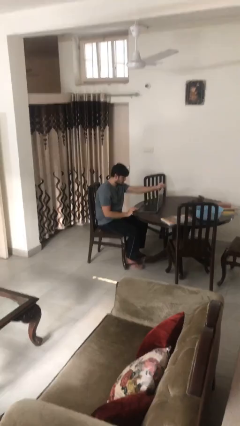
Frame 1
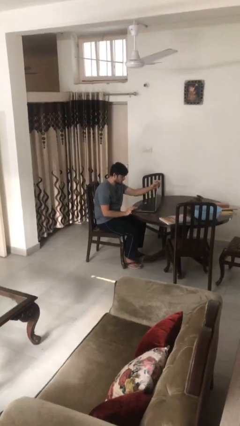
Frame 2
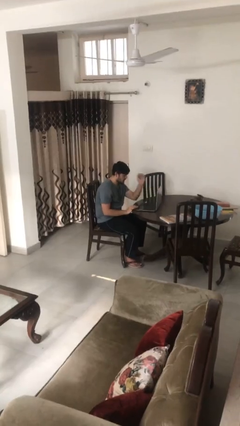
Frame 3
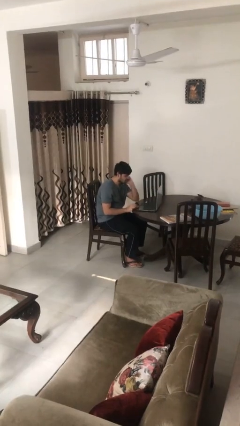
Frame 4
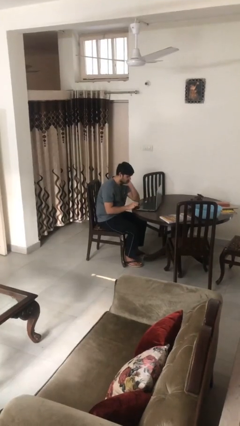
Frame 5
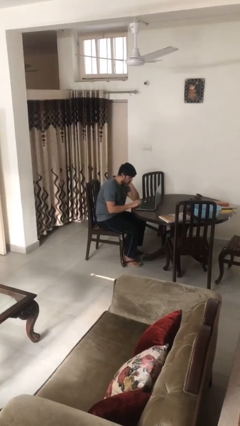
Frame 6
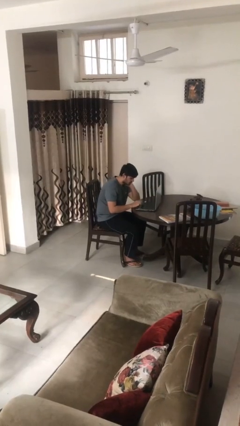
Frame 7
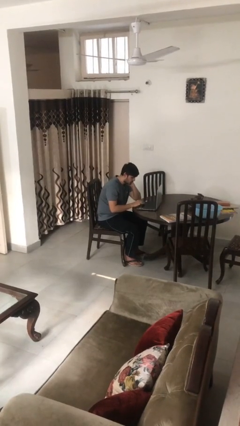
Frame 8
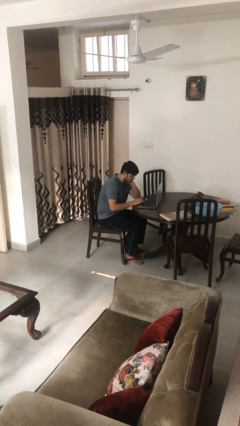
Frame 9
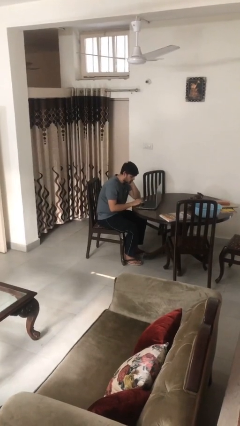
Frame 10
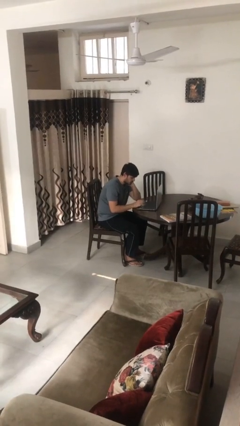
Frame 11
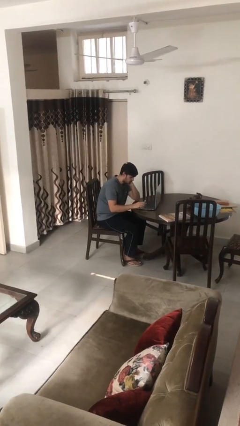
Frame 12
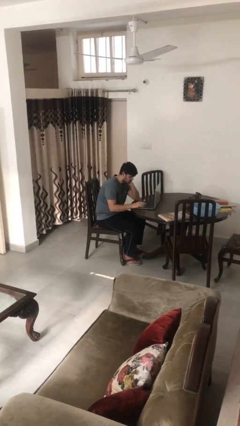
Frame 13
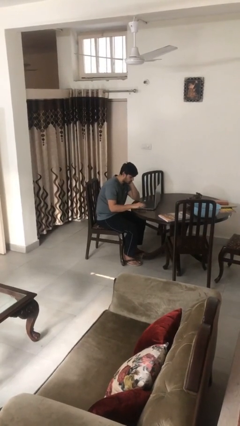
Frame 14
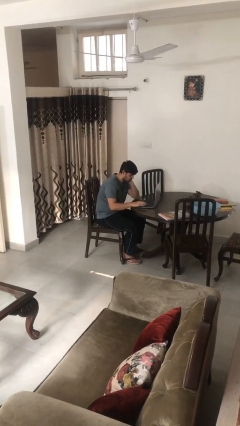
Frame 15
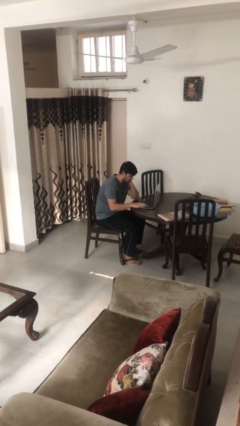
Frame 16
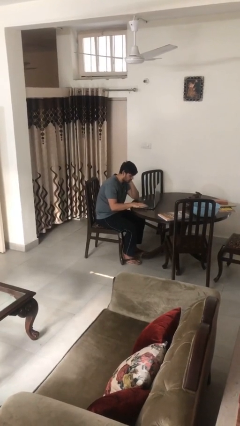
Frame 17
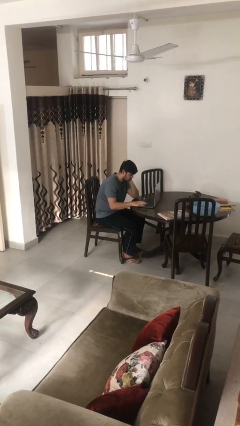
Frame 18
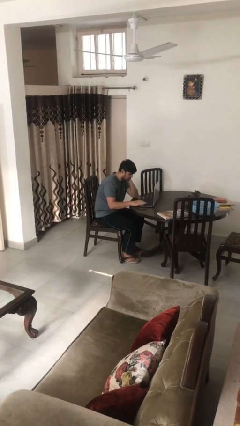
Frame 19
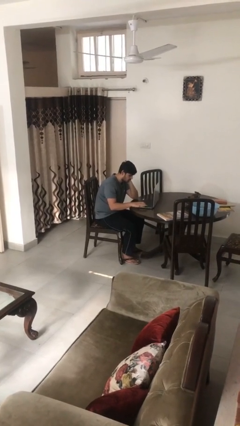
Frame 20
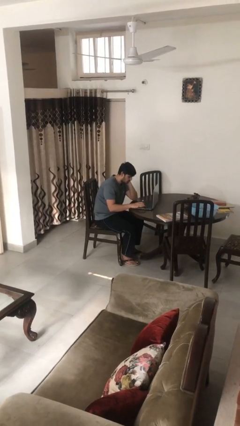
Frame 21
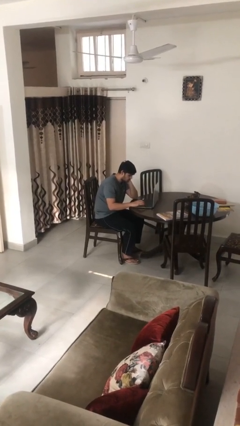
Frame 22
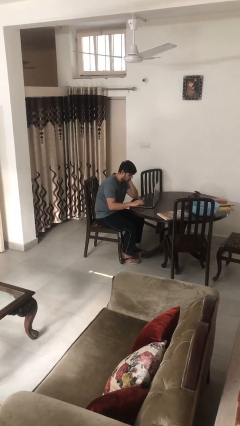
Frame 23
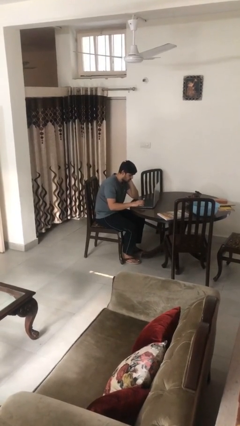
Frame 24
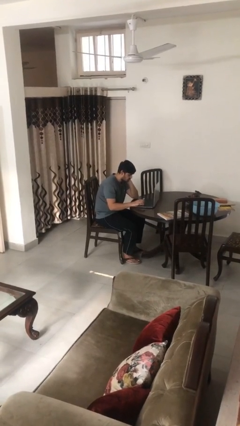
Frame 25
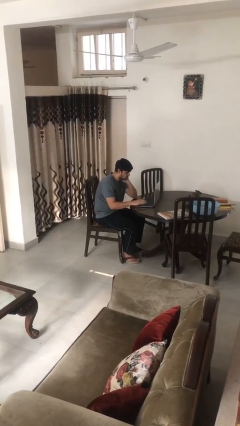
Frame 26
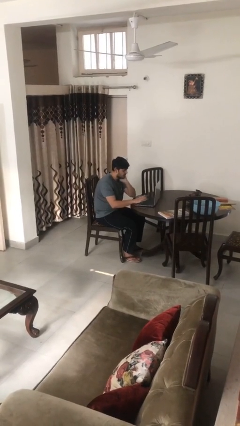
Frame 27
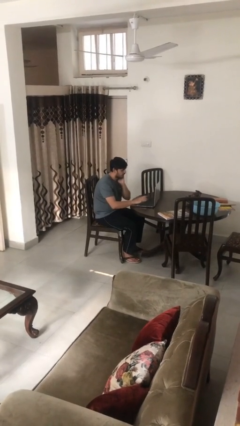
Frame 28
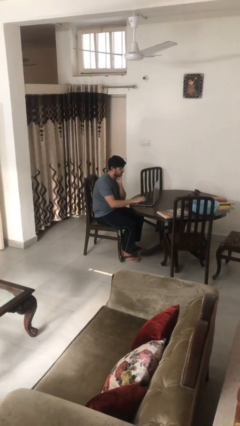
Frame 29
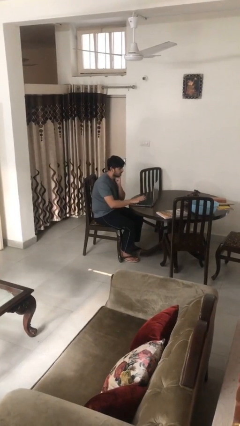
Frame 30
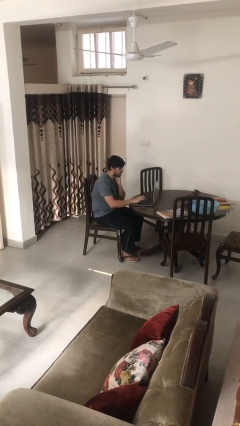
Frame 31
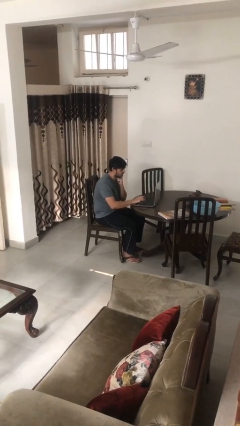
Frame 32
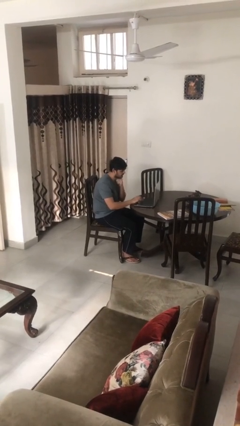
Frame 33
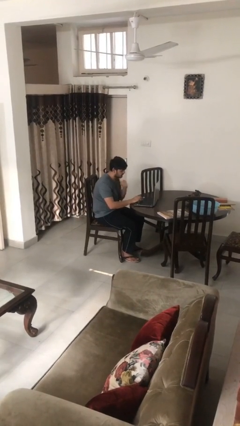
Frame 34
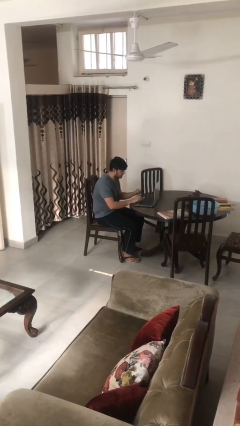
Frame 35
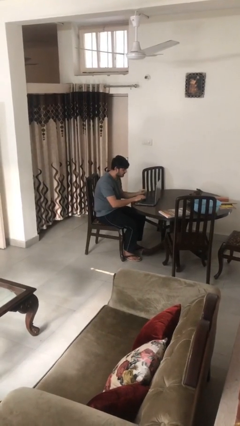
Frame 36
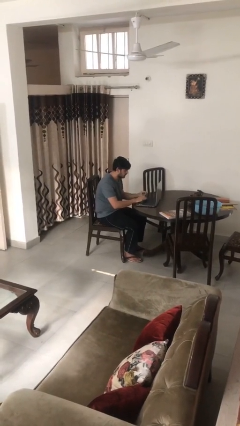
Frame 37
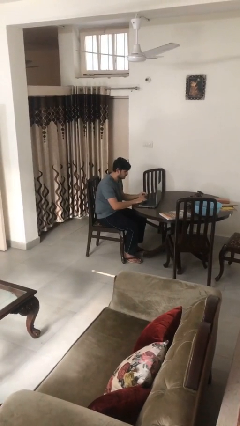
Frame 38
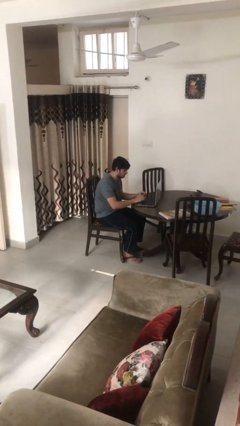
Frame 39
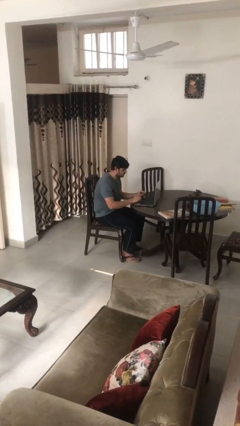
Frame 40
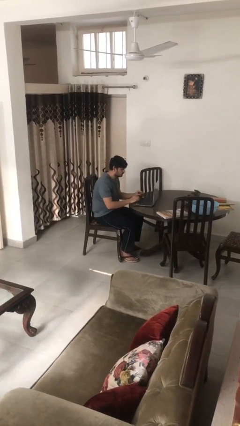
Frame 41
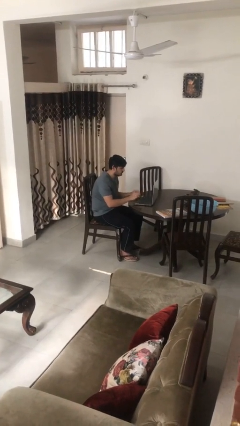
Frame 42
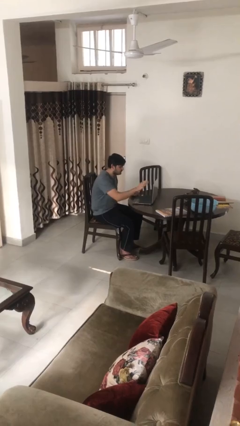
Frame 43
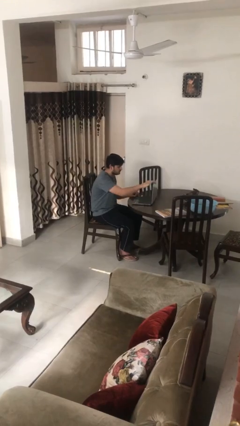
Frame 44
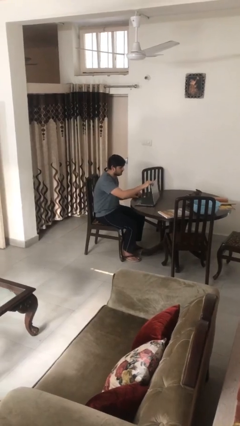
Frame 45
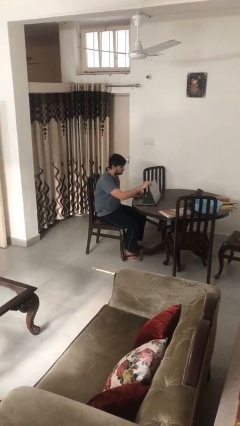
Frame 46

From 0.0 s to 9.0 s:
person interacts with laptop

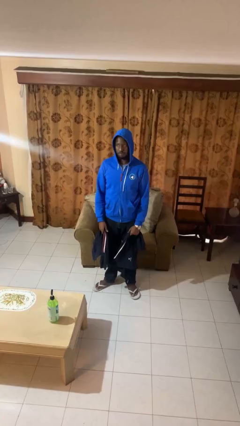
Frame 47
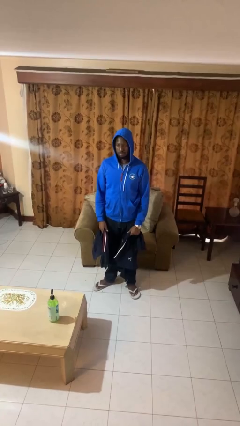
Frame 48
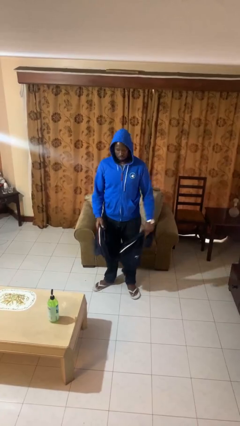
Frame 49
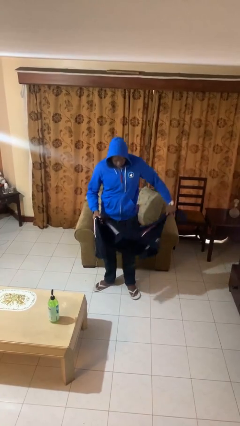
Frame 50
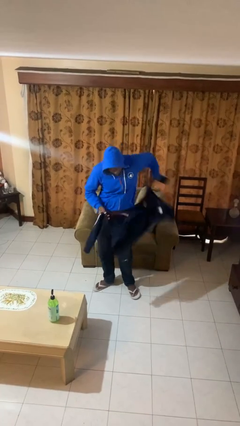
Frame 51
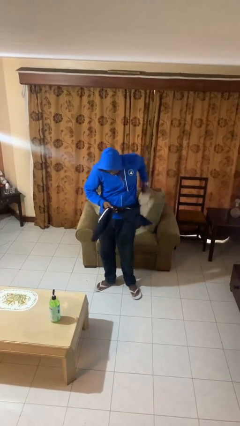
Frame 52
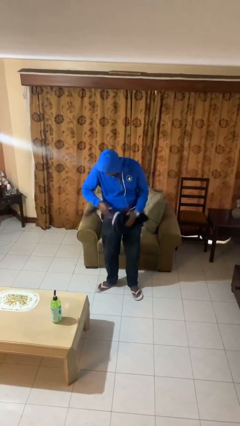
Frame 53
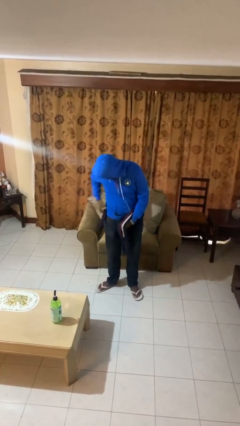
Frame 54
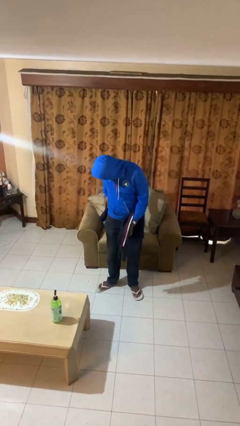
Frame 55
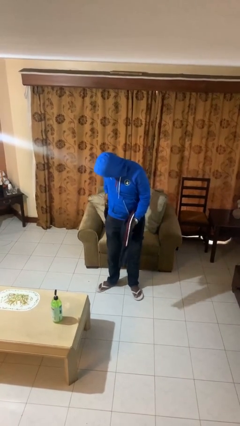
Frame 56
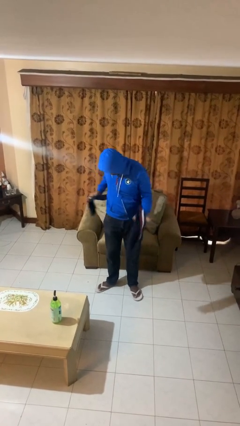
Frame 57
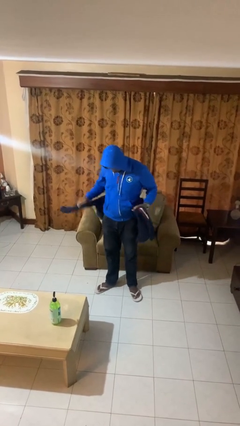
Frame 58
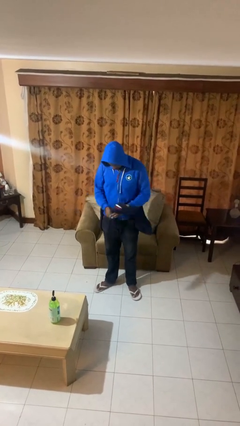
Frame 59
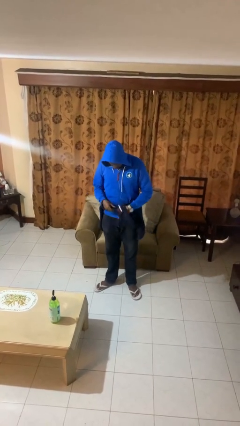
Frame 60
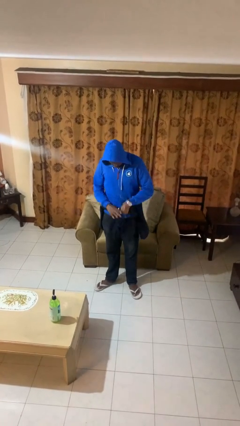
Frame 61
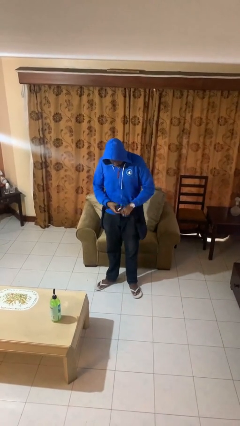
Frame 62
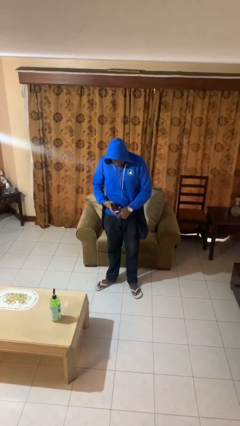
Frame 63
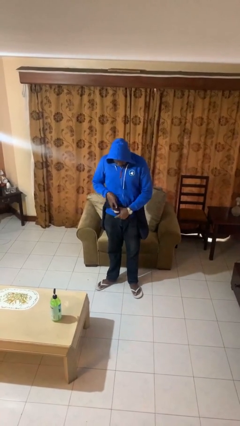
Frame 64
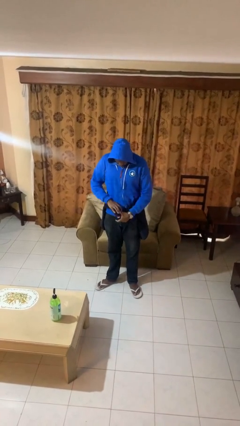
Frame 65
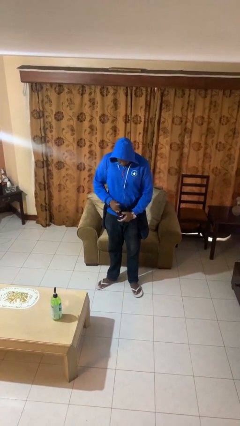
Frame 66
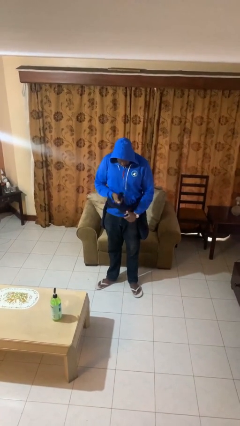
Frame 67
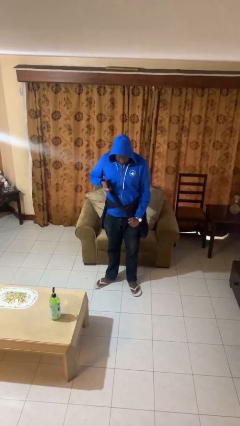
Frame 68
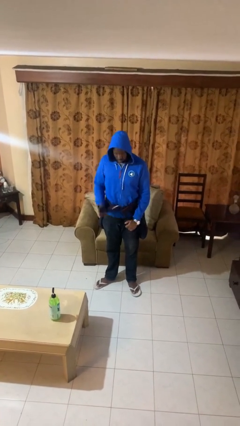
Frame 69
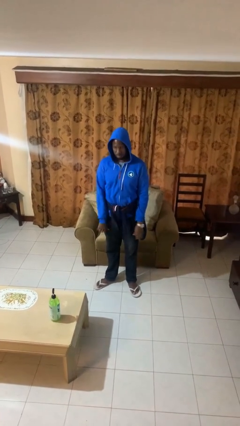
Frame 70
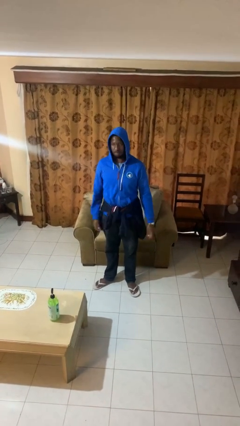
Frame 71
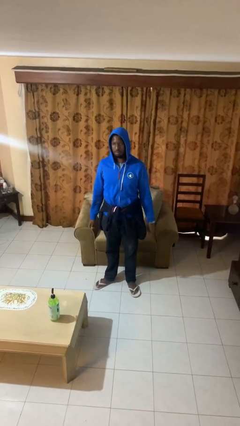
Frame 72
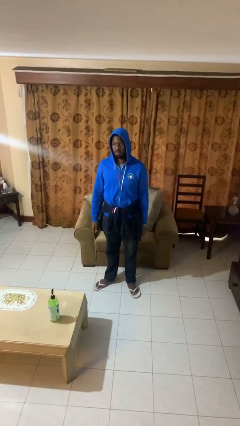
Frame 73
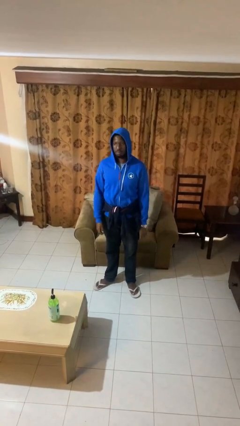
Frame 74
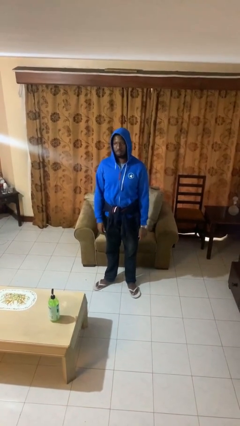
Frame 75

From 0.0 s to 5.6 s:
person ties jacket around waist

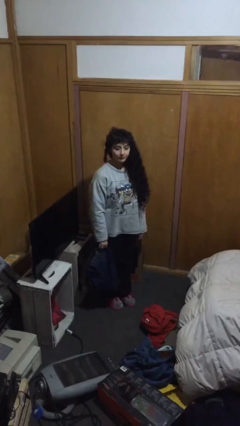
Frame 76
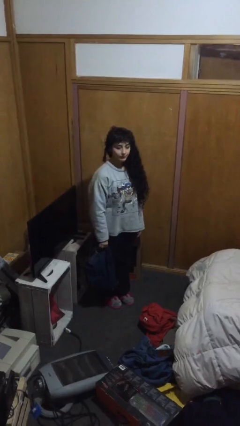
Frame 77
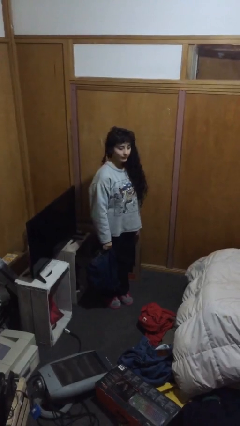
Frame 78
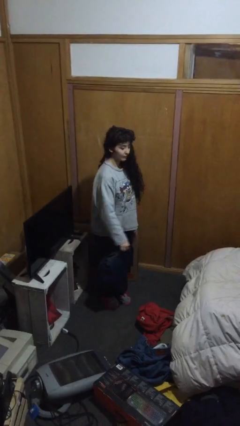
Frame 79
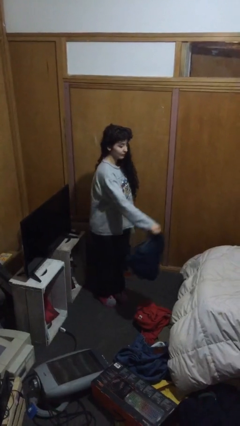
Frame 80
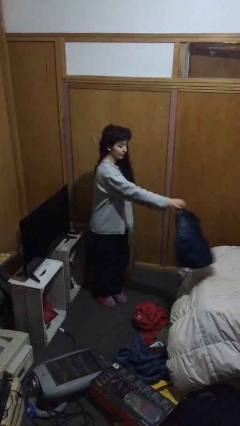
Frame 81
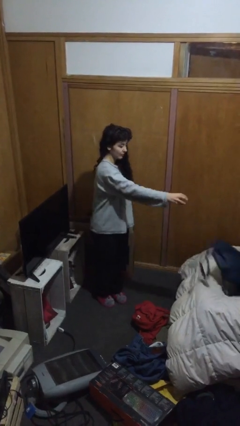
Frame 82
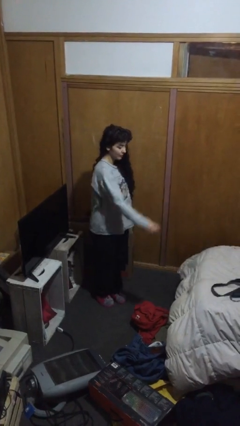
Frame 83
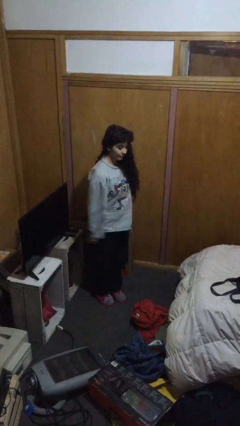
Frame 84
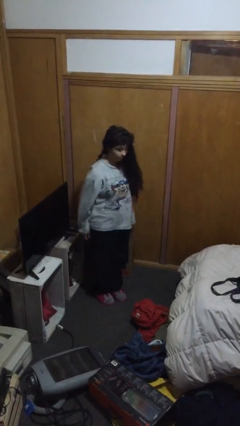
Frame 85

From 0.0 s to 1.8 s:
person throws object on bed

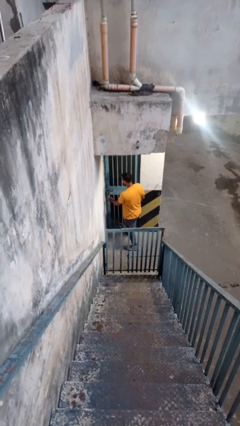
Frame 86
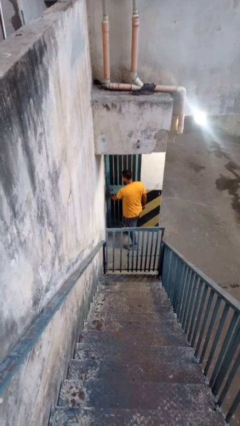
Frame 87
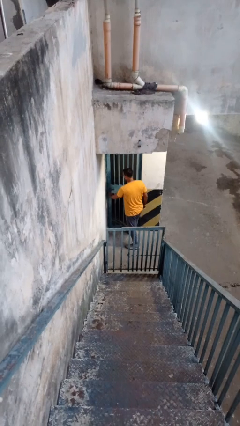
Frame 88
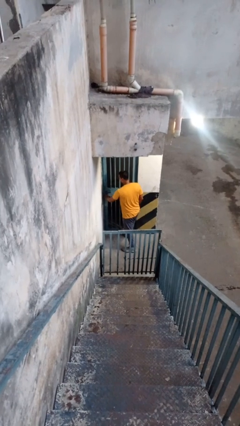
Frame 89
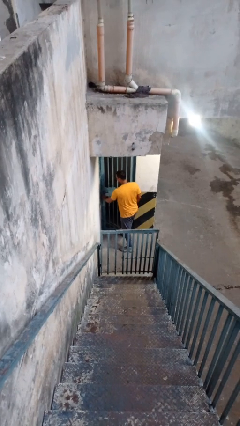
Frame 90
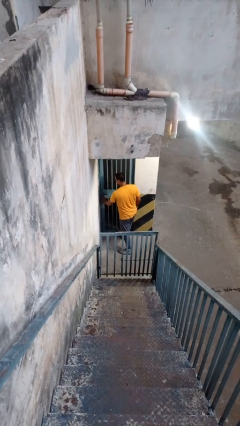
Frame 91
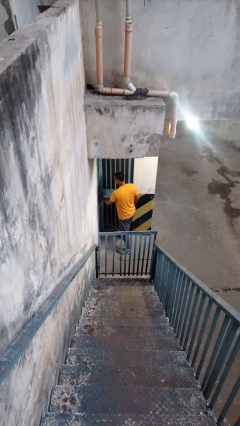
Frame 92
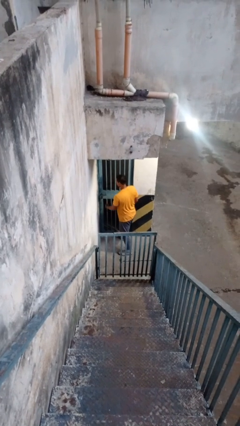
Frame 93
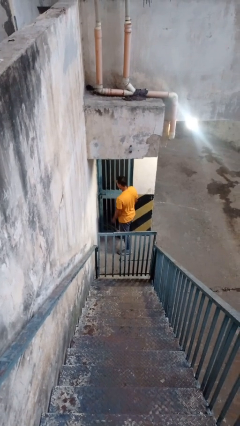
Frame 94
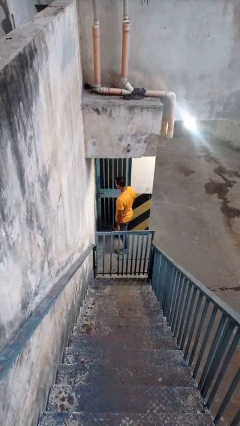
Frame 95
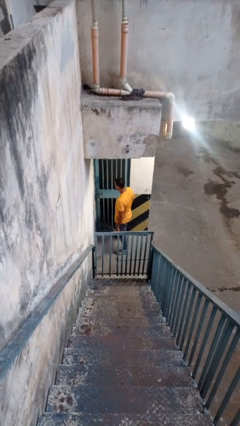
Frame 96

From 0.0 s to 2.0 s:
person locks door with keys
